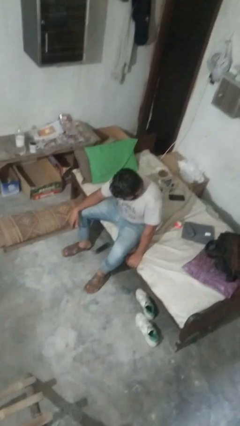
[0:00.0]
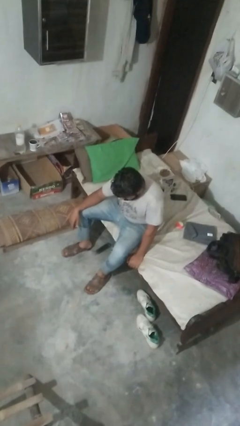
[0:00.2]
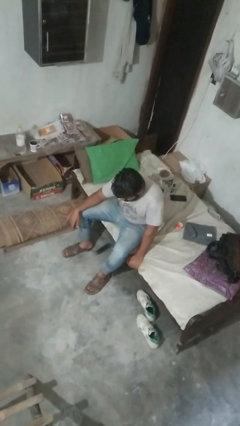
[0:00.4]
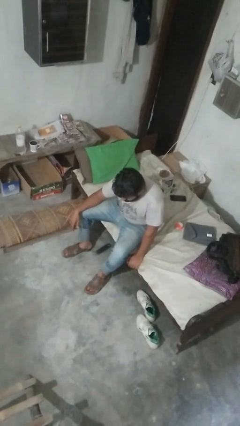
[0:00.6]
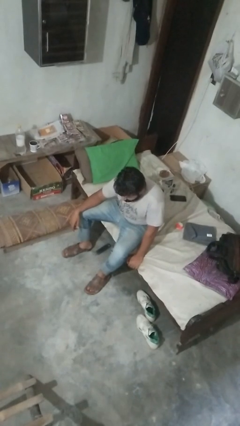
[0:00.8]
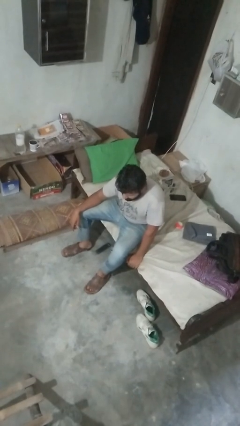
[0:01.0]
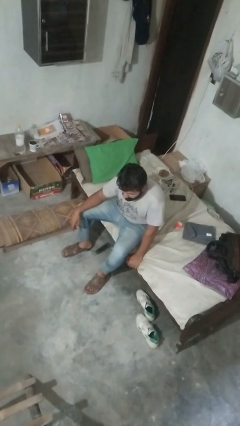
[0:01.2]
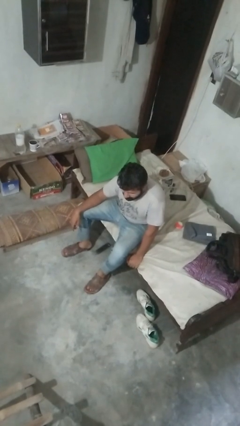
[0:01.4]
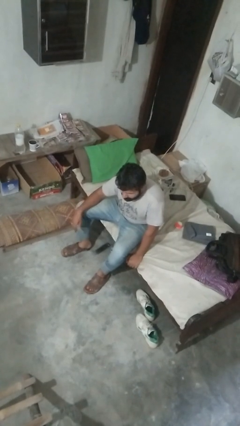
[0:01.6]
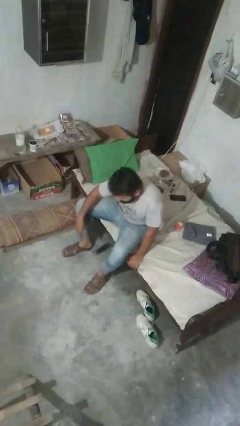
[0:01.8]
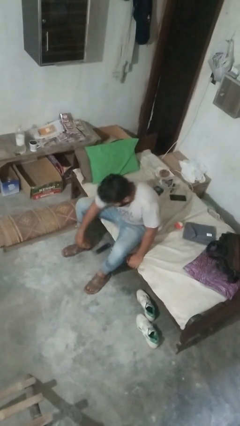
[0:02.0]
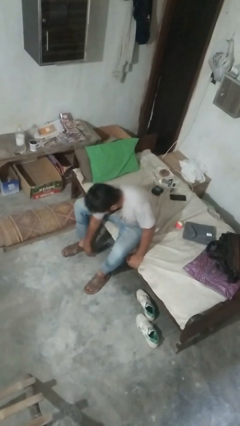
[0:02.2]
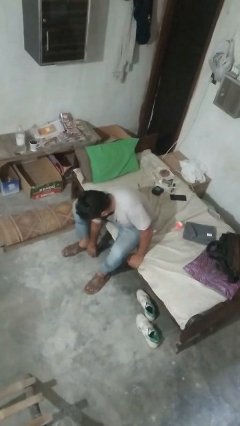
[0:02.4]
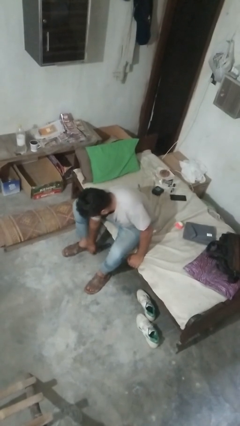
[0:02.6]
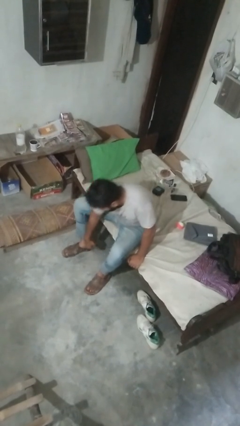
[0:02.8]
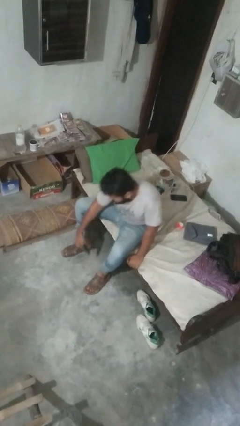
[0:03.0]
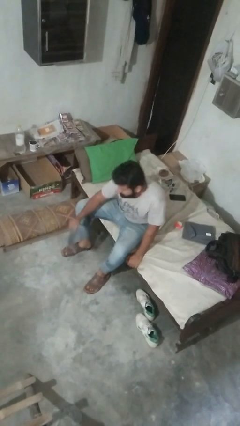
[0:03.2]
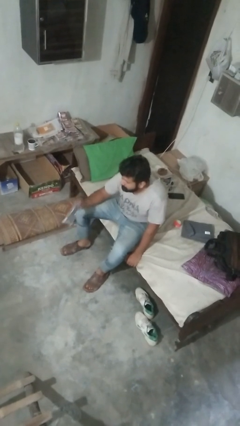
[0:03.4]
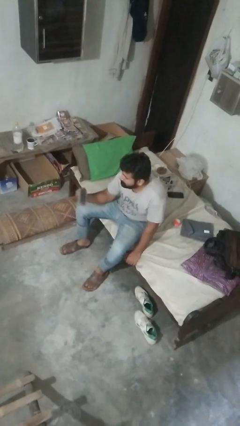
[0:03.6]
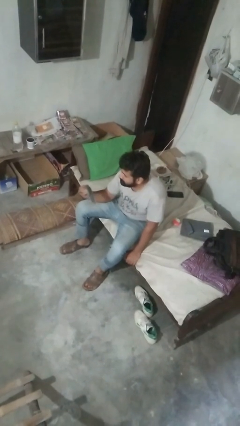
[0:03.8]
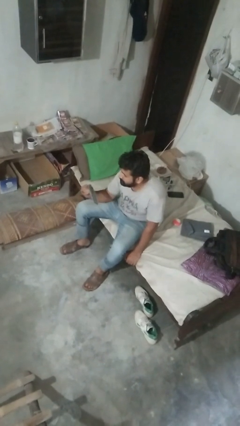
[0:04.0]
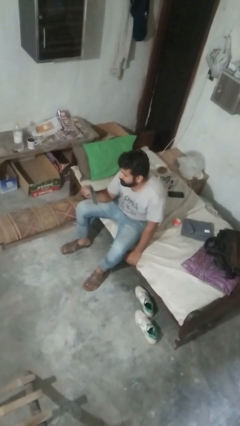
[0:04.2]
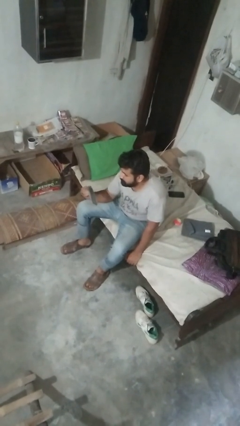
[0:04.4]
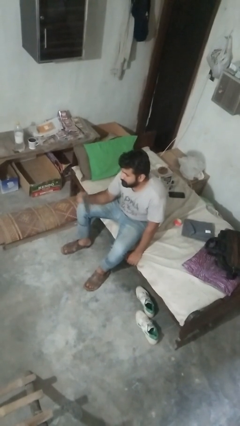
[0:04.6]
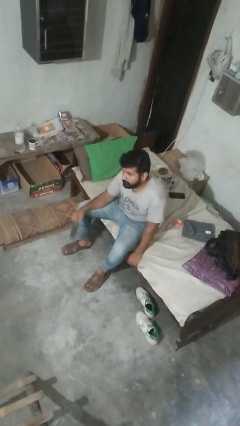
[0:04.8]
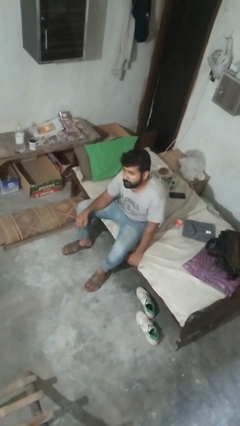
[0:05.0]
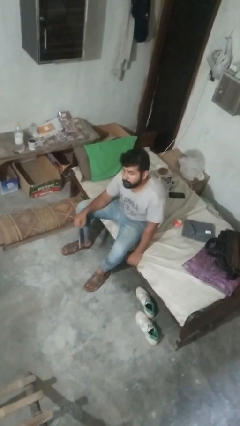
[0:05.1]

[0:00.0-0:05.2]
person searches under couch

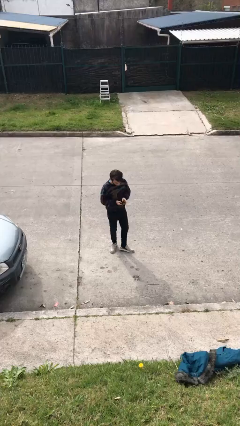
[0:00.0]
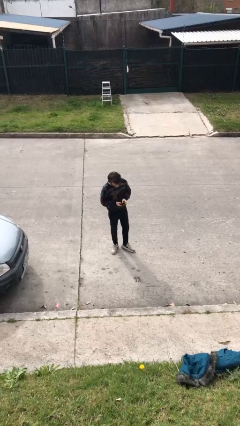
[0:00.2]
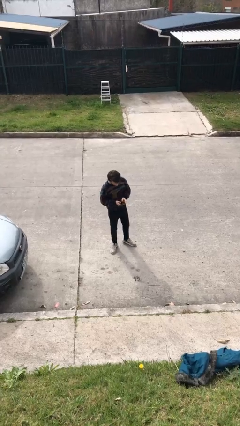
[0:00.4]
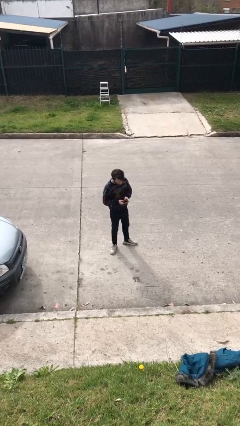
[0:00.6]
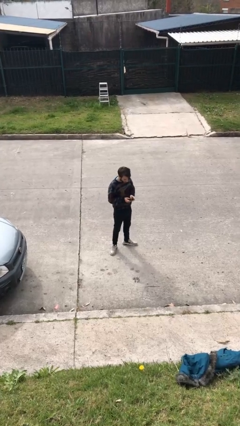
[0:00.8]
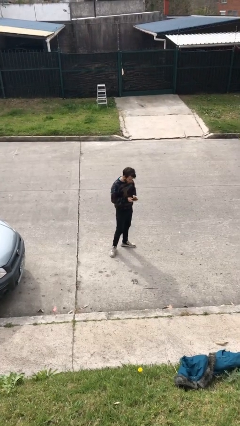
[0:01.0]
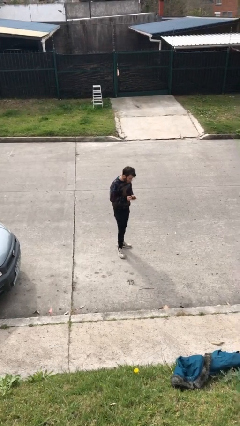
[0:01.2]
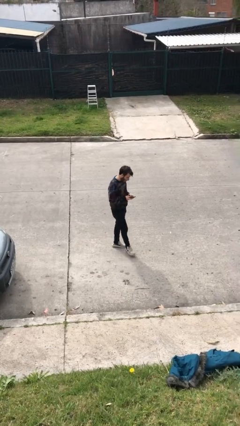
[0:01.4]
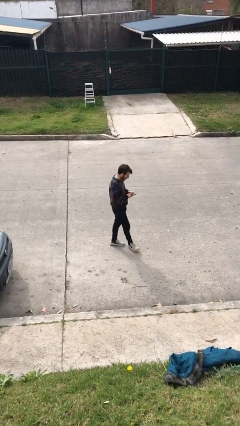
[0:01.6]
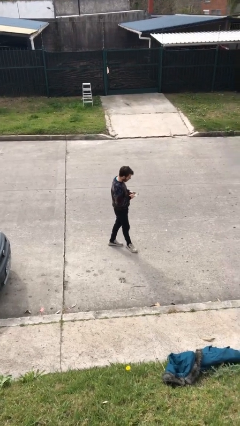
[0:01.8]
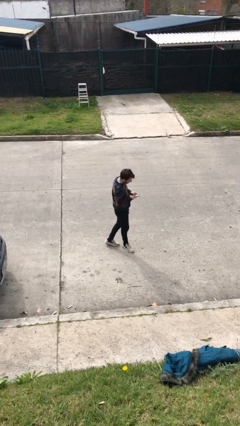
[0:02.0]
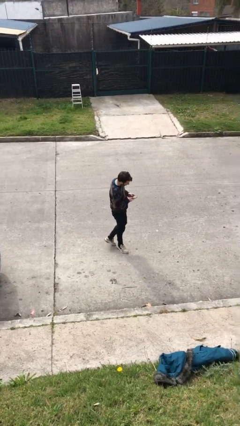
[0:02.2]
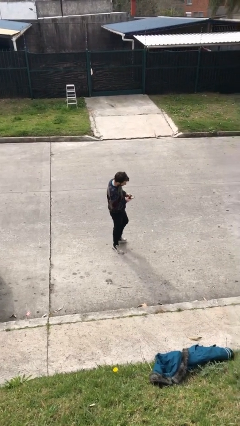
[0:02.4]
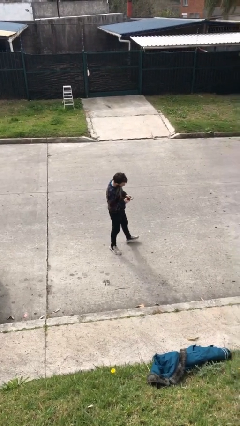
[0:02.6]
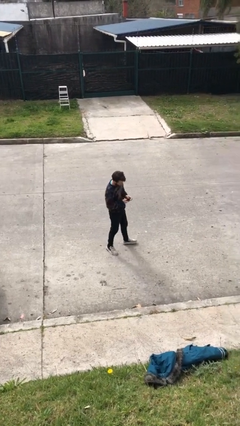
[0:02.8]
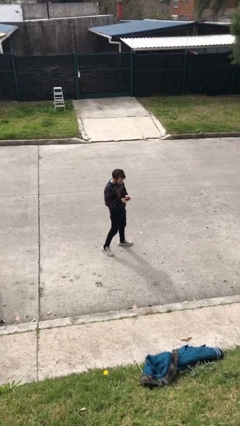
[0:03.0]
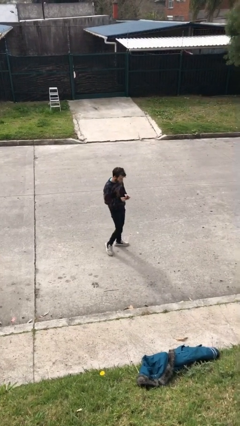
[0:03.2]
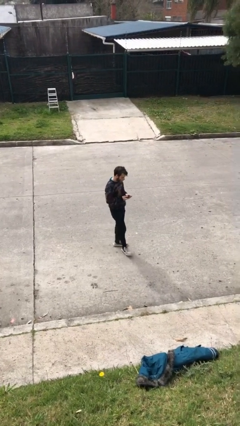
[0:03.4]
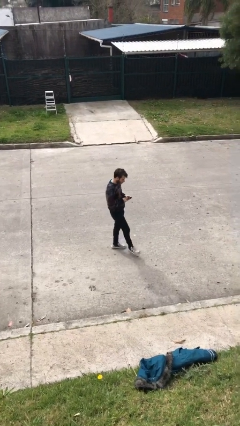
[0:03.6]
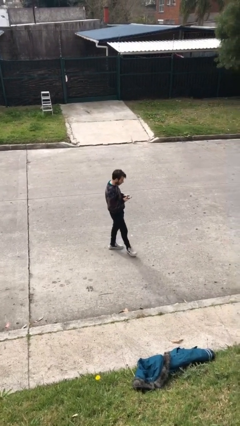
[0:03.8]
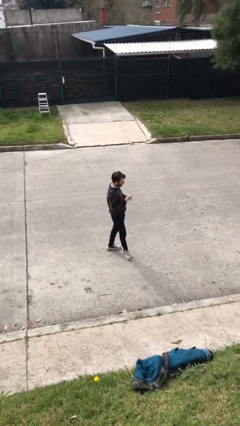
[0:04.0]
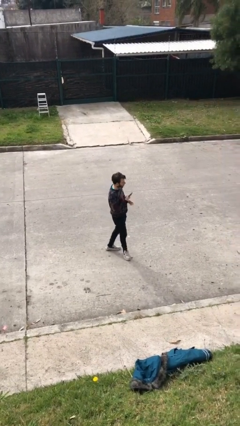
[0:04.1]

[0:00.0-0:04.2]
person texts on phone

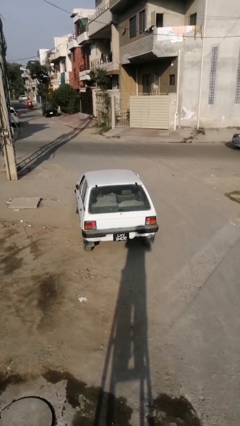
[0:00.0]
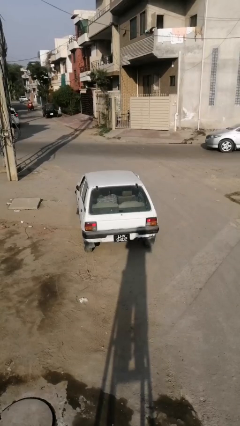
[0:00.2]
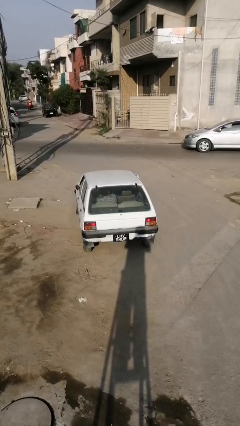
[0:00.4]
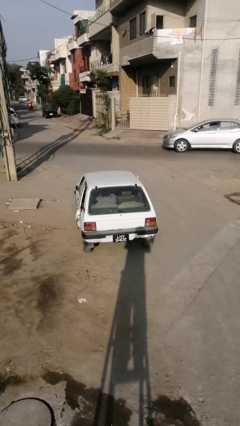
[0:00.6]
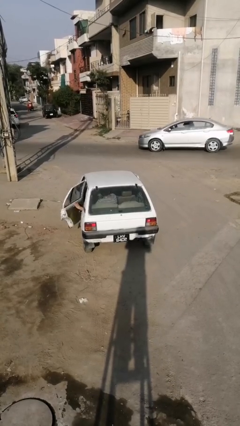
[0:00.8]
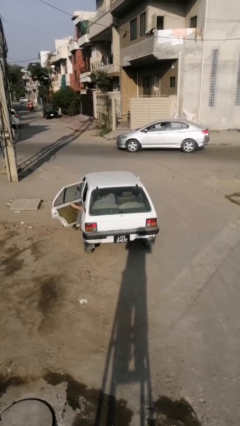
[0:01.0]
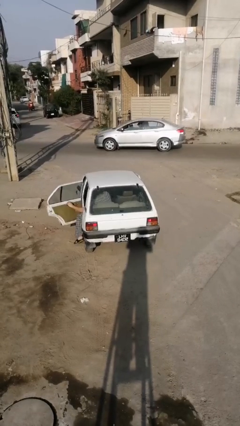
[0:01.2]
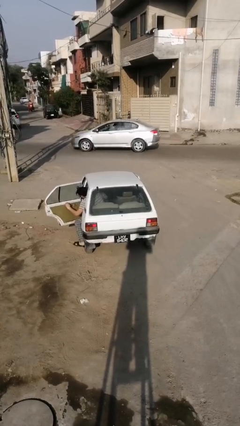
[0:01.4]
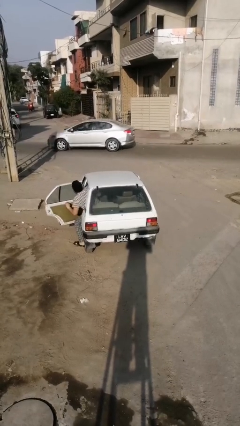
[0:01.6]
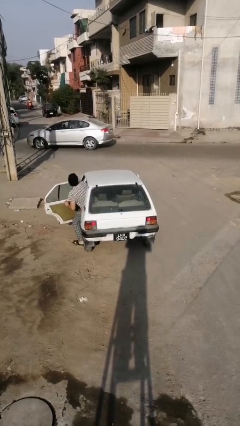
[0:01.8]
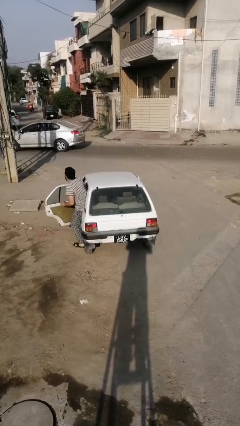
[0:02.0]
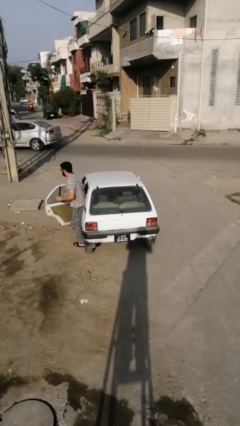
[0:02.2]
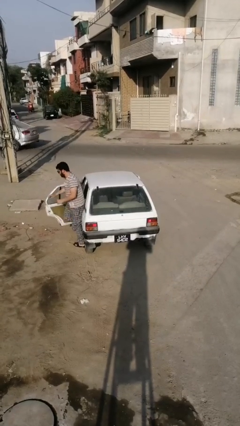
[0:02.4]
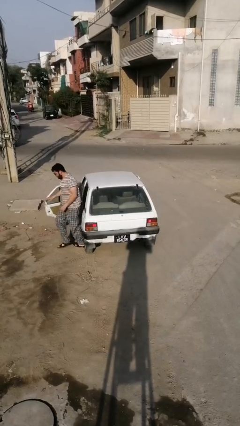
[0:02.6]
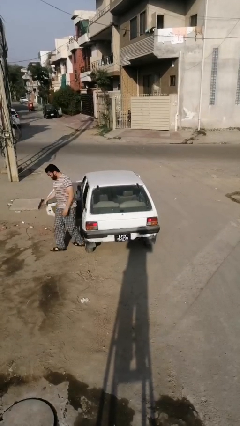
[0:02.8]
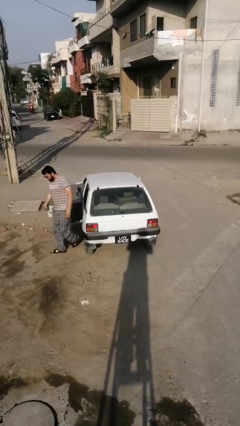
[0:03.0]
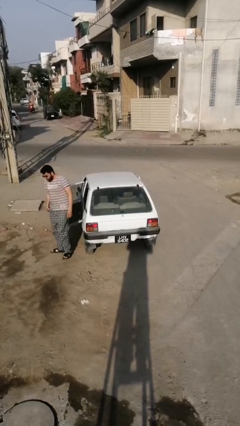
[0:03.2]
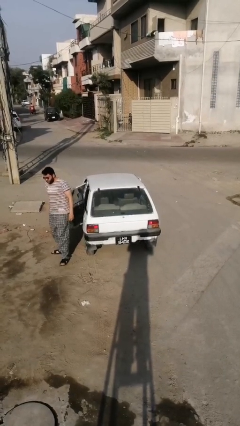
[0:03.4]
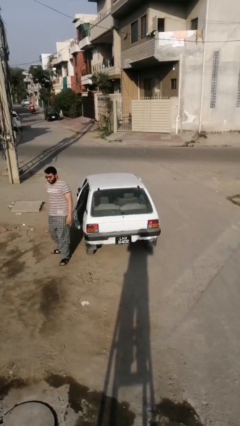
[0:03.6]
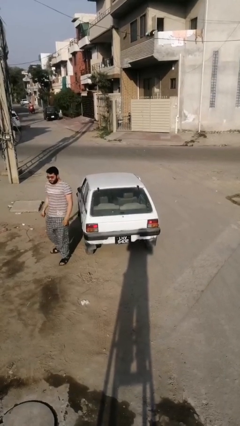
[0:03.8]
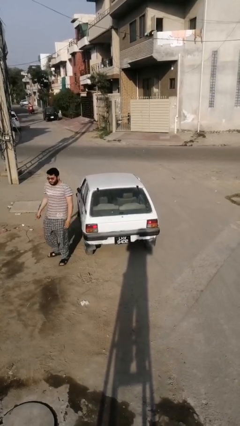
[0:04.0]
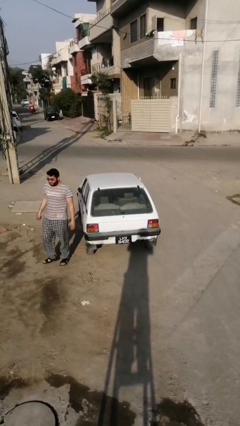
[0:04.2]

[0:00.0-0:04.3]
car drops off person

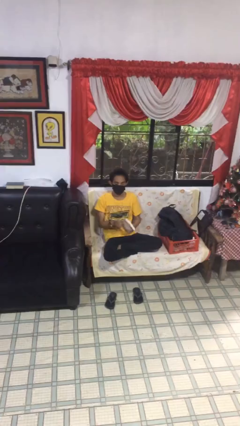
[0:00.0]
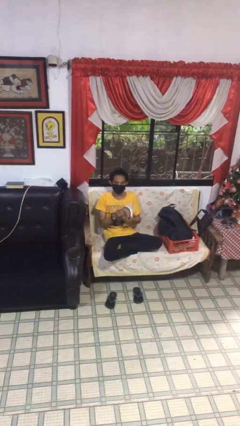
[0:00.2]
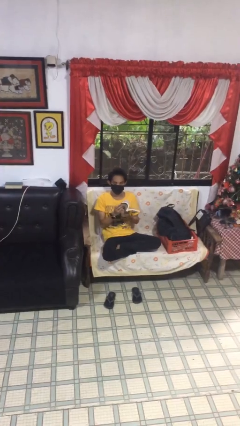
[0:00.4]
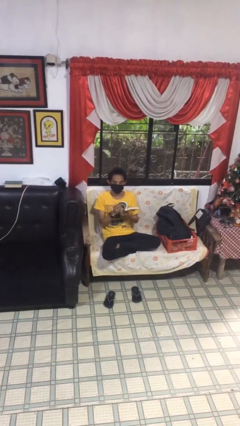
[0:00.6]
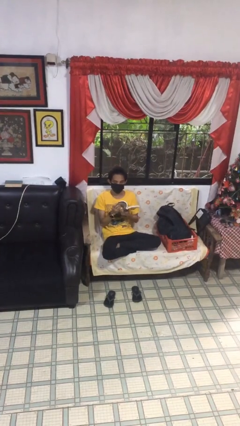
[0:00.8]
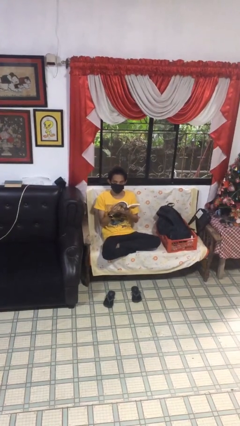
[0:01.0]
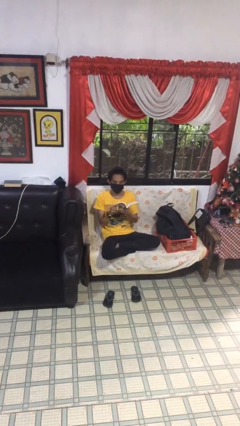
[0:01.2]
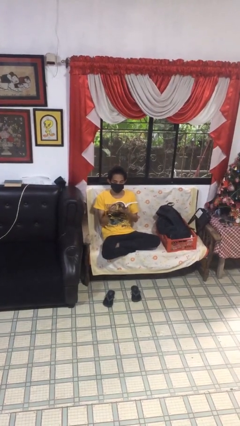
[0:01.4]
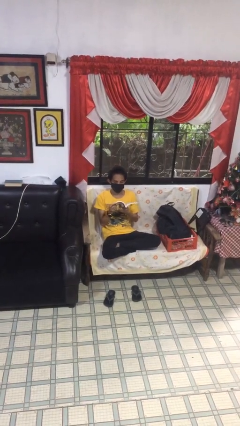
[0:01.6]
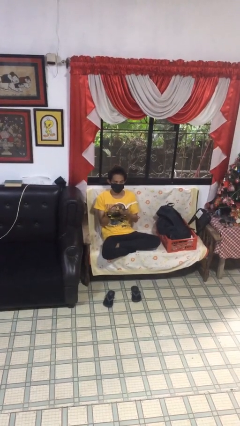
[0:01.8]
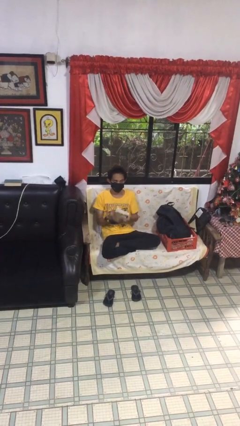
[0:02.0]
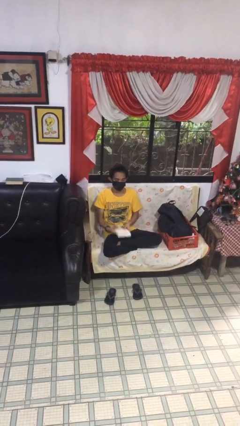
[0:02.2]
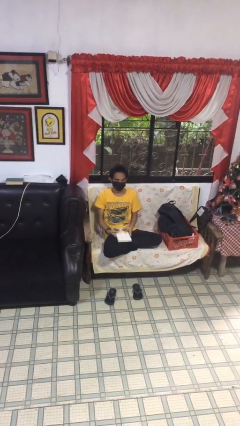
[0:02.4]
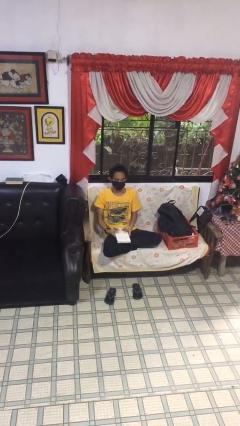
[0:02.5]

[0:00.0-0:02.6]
person interacts with laptop

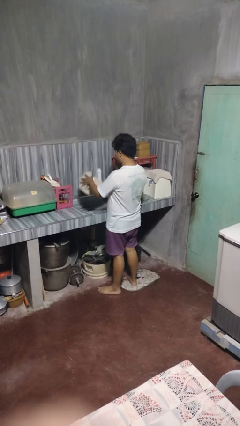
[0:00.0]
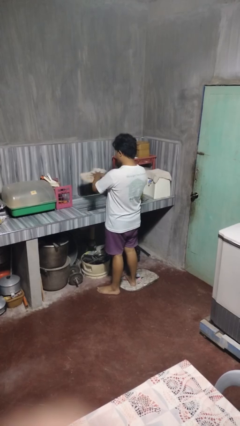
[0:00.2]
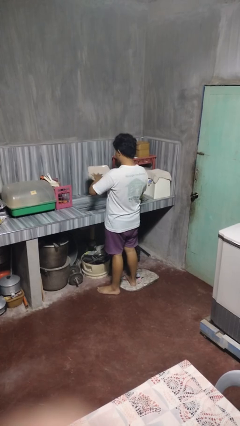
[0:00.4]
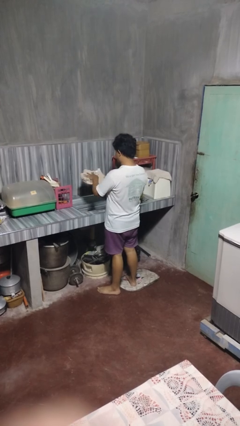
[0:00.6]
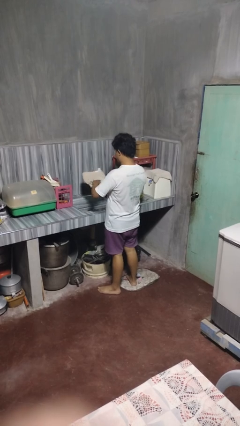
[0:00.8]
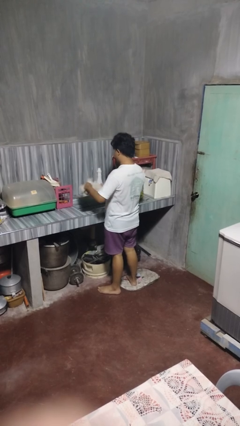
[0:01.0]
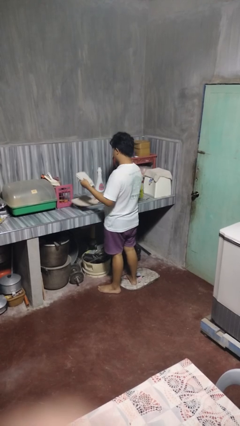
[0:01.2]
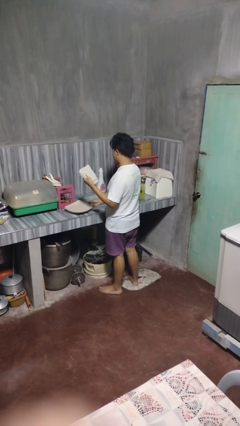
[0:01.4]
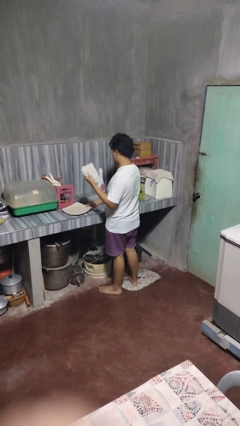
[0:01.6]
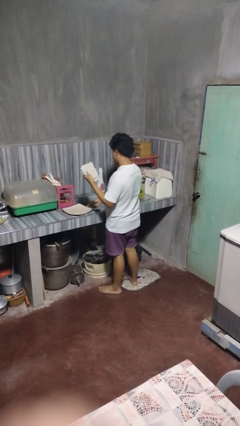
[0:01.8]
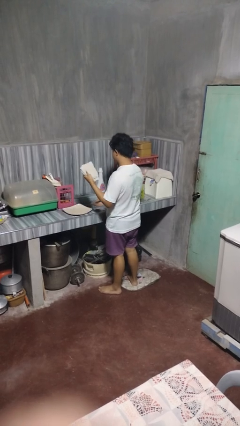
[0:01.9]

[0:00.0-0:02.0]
person dries dish
